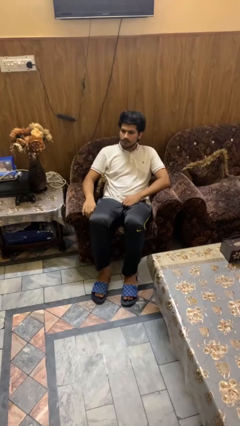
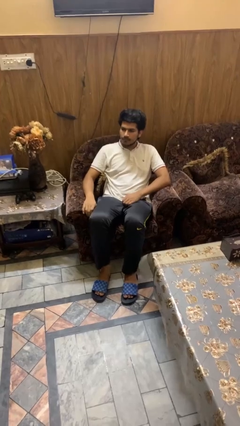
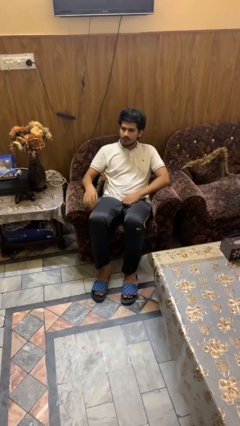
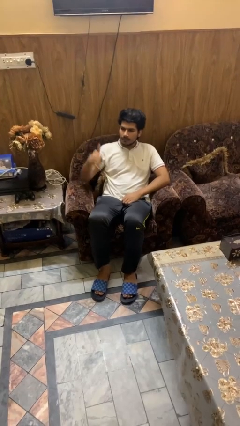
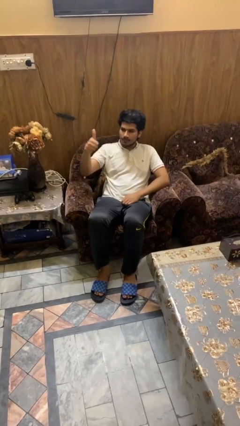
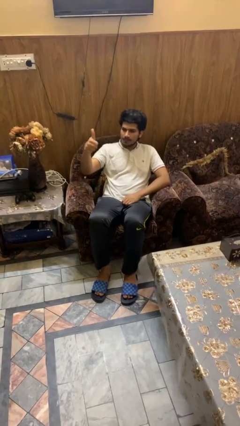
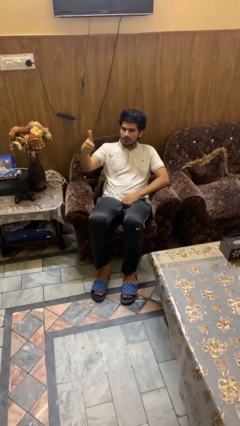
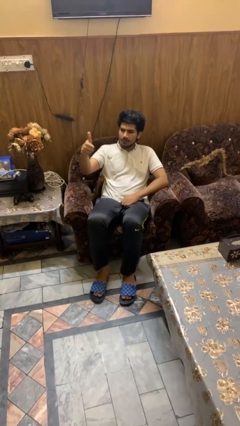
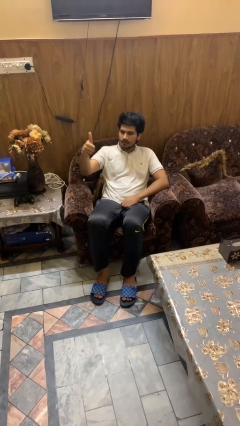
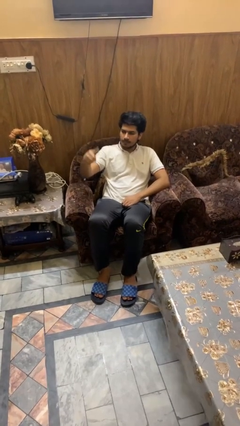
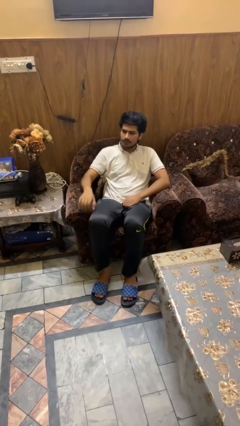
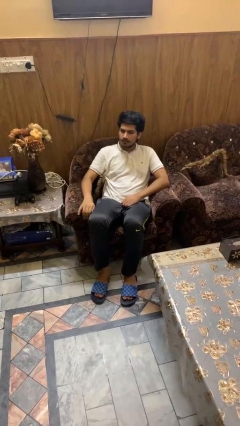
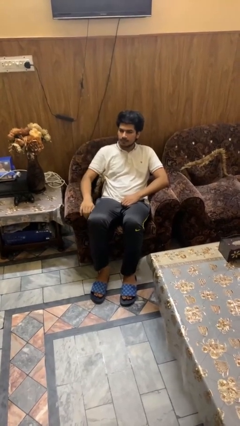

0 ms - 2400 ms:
person gestures thumbs up

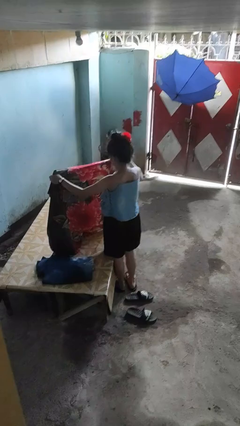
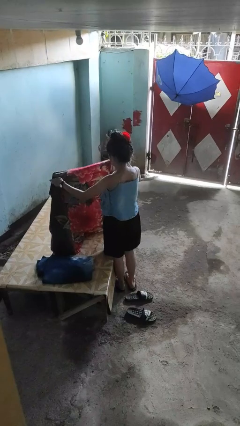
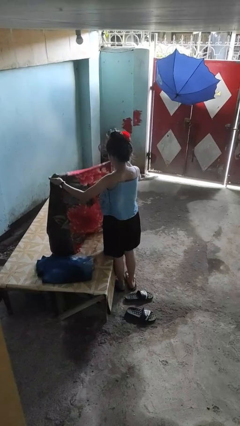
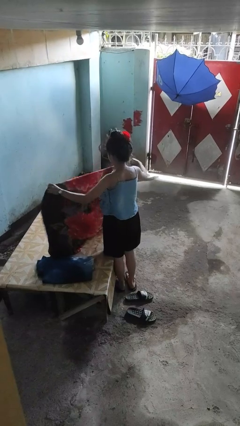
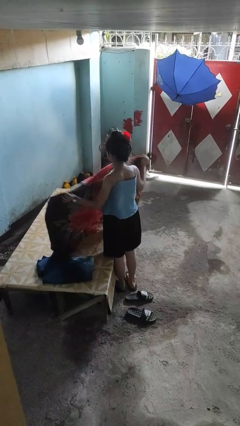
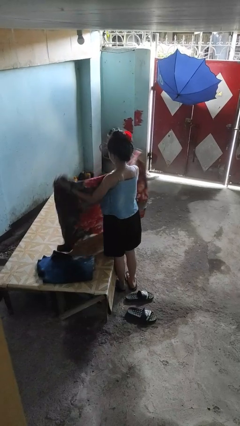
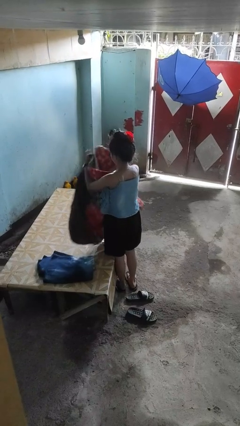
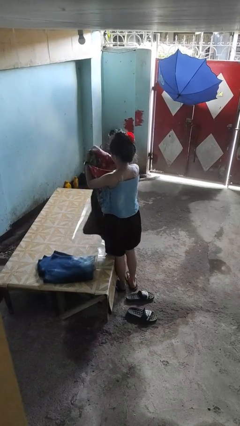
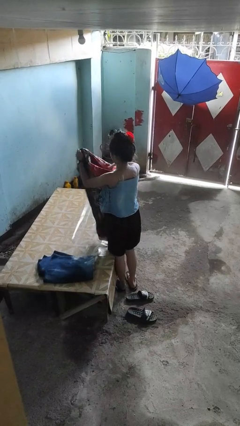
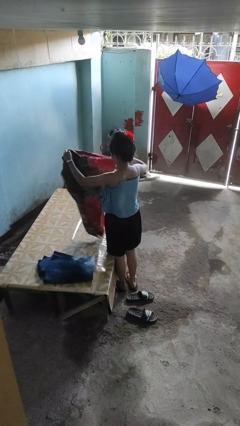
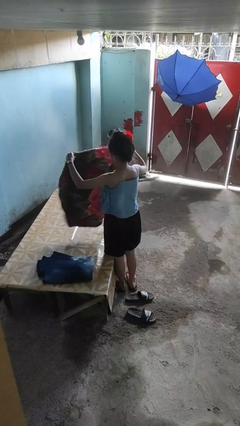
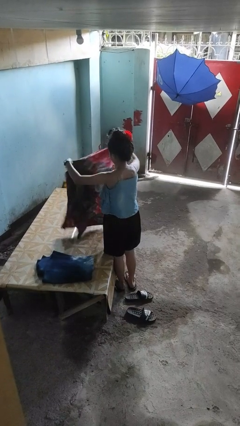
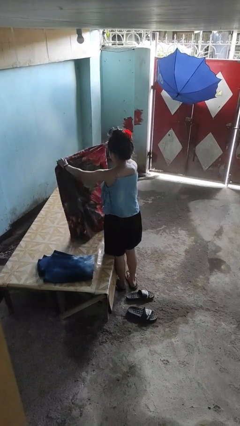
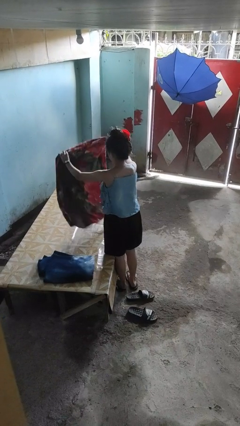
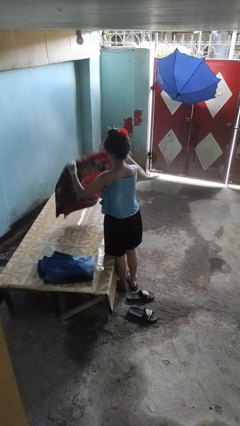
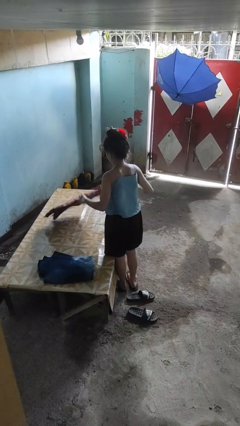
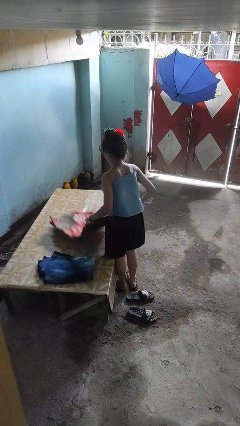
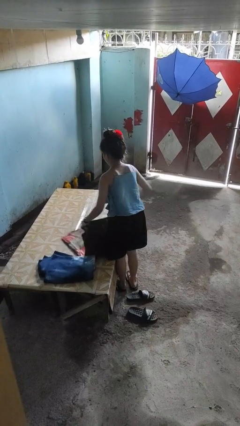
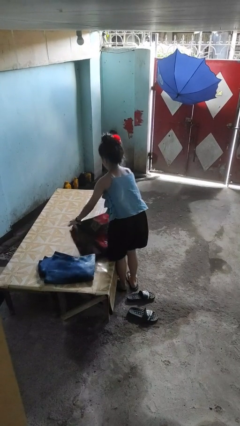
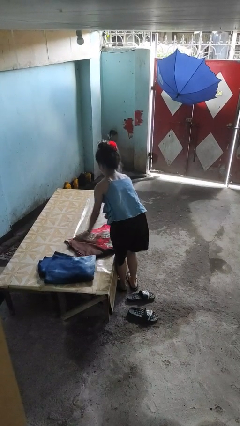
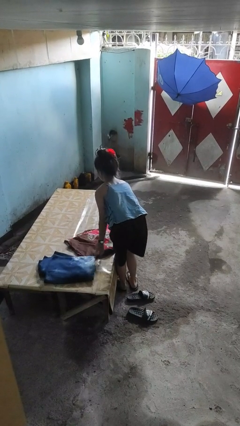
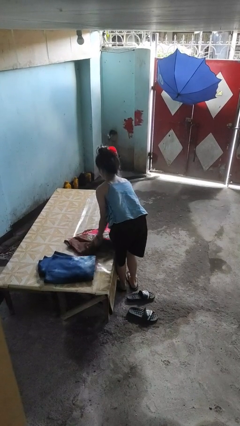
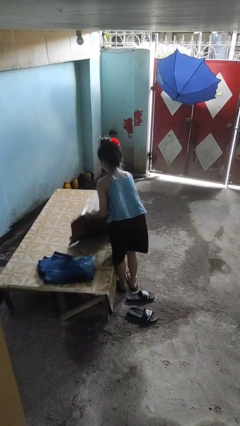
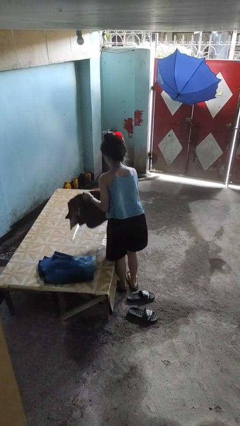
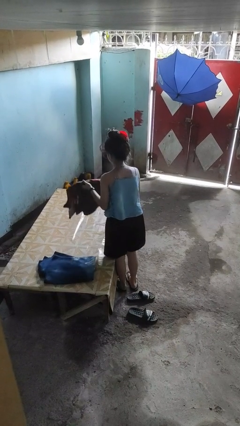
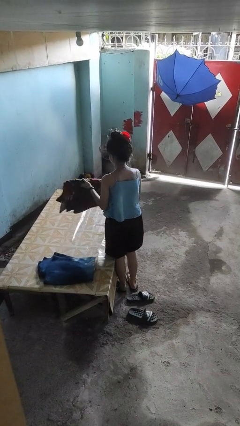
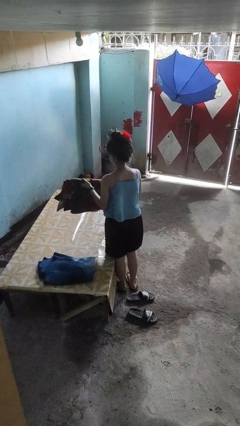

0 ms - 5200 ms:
person folds blanket

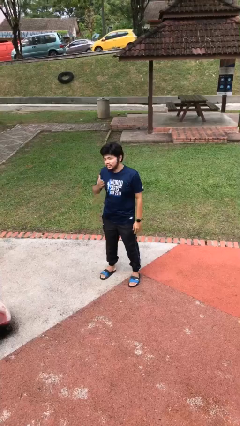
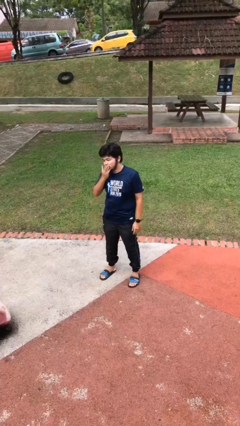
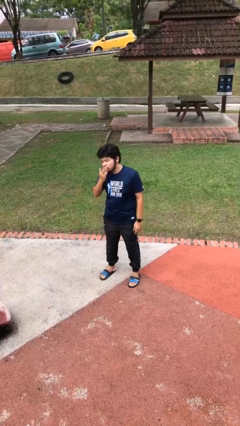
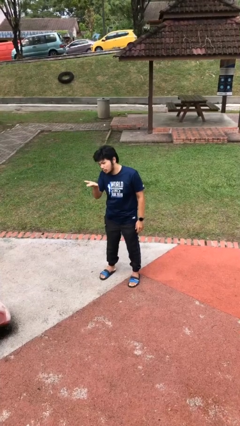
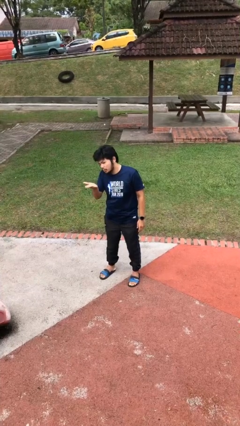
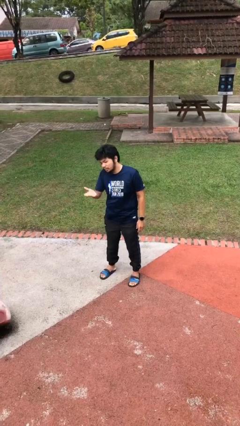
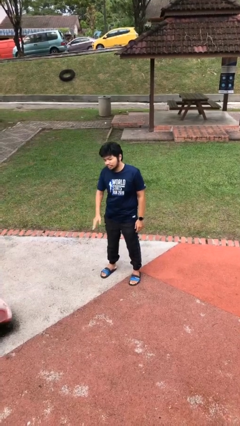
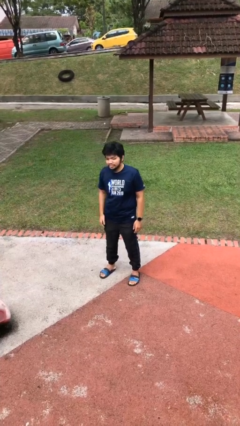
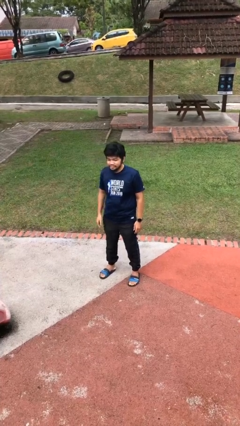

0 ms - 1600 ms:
person gestures blow kiss

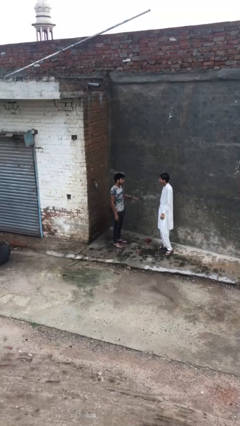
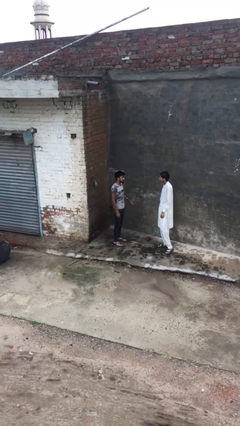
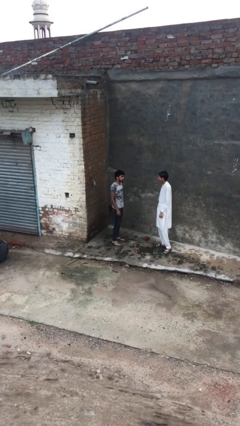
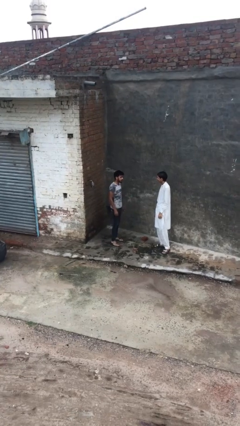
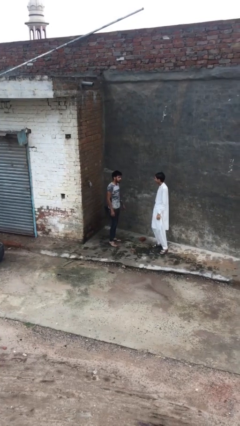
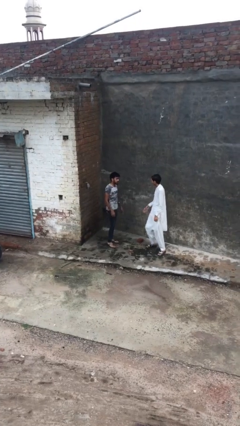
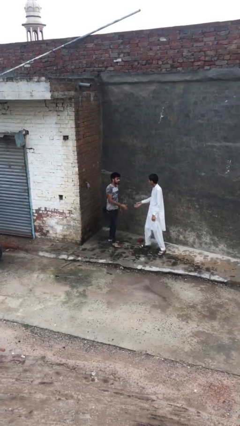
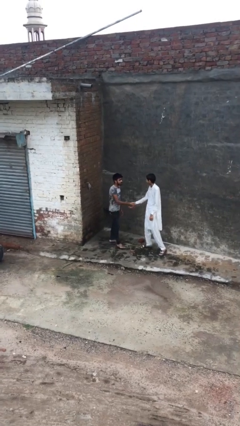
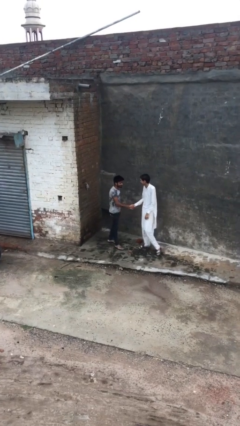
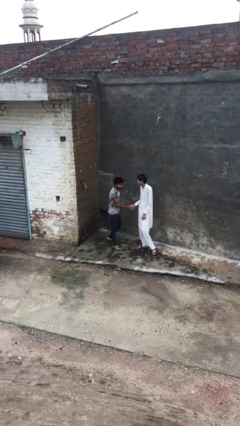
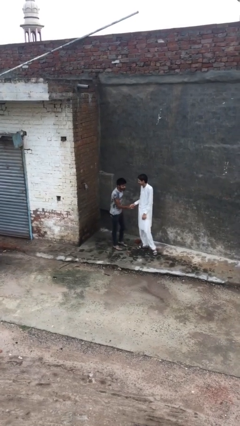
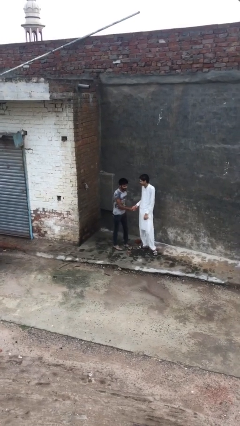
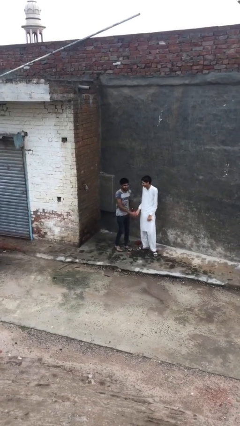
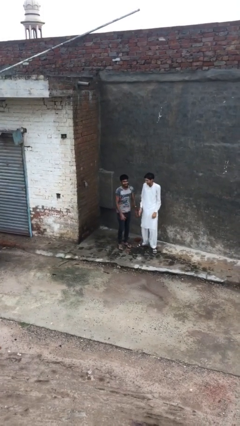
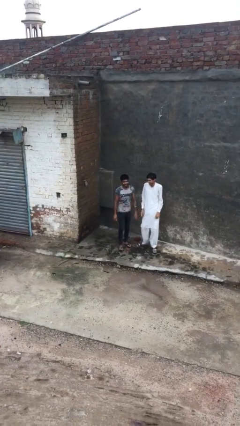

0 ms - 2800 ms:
person shakes hand

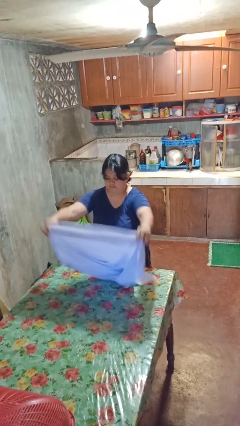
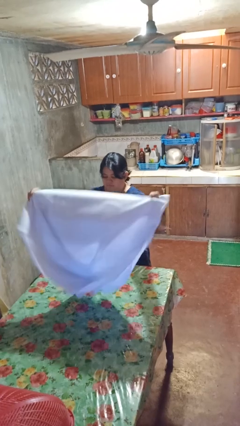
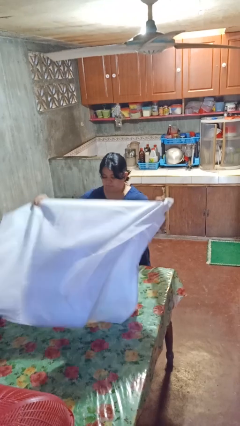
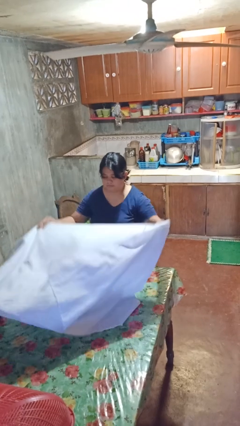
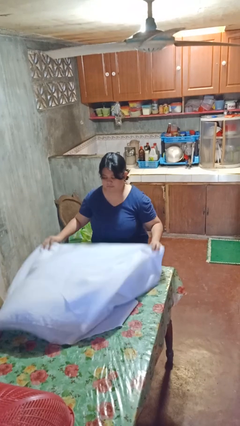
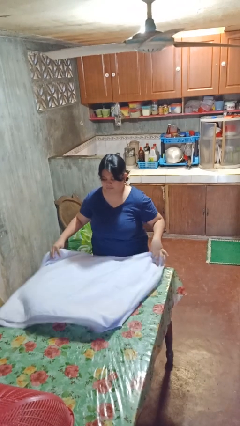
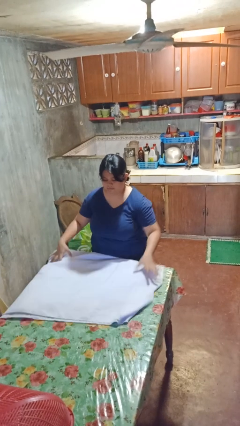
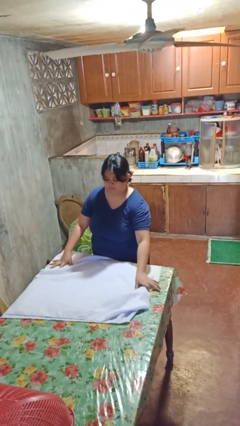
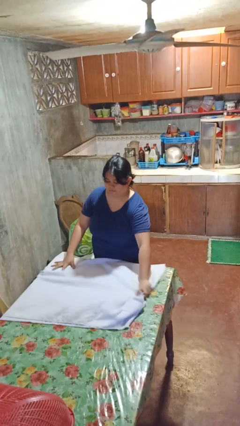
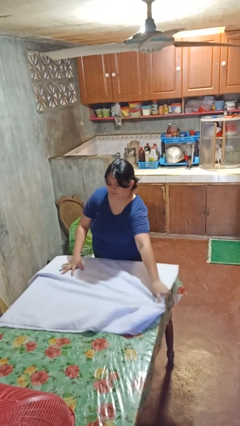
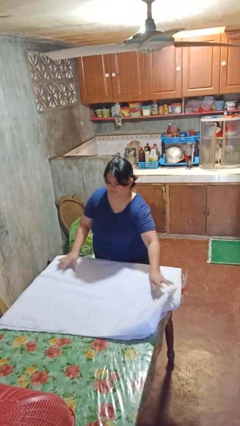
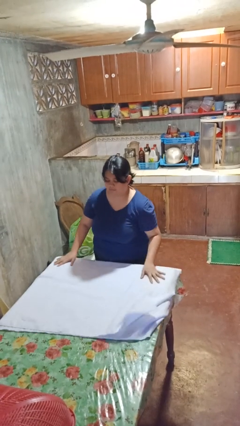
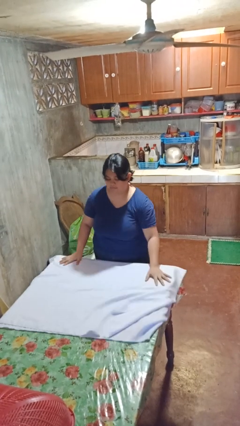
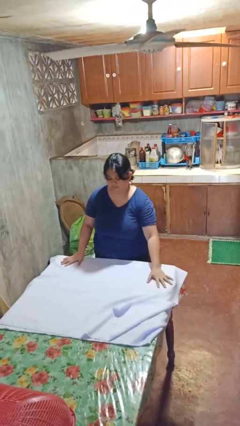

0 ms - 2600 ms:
person spreads tablecloth

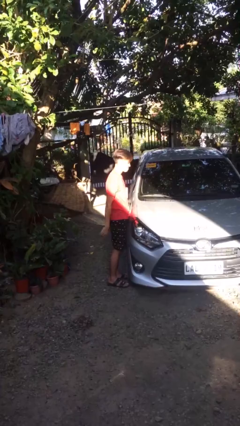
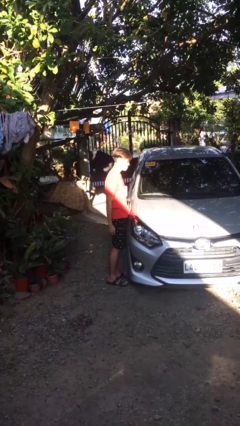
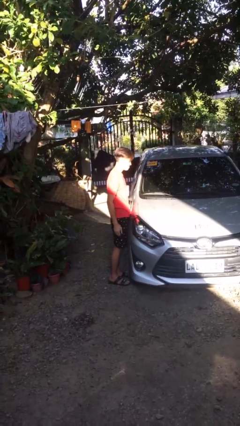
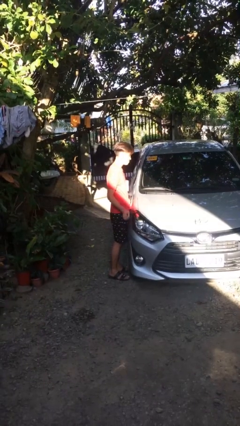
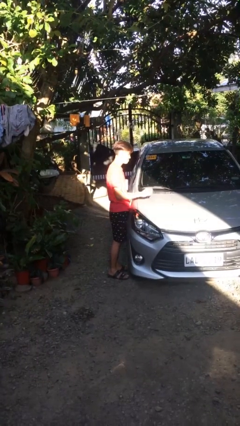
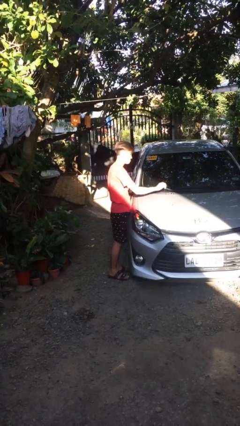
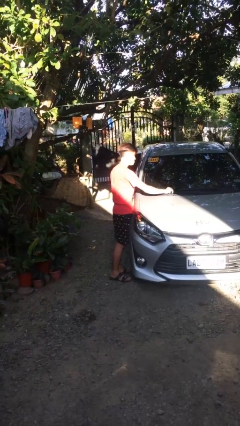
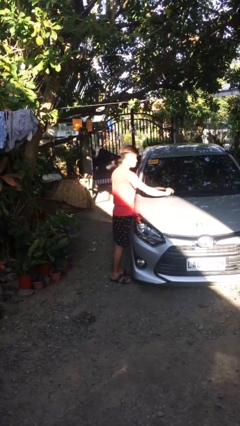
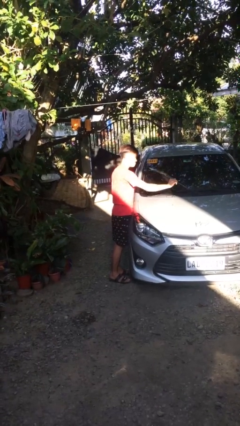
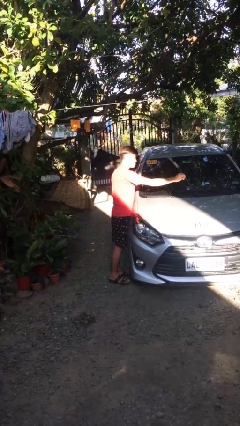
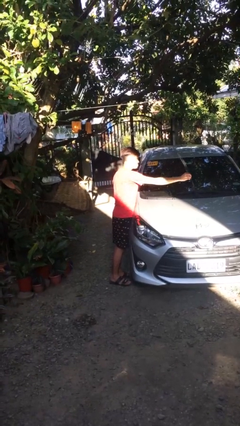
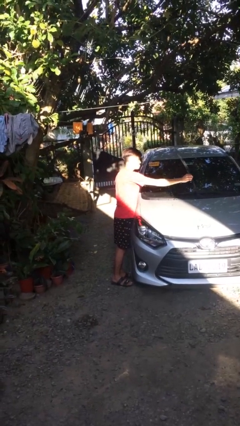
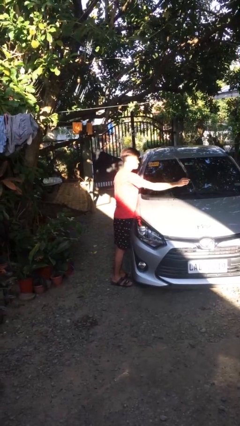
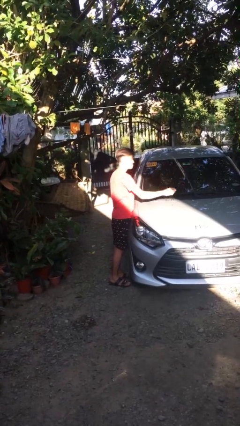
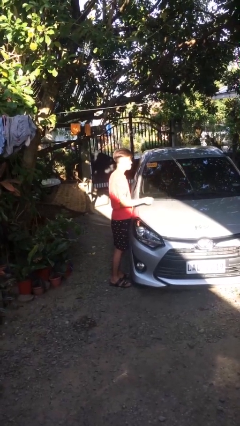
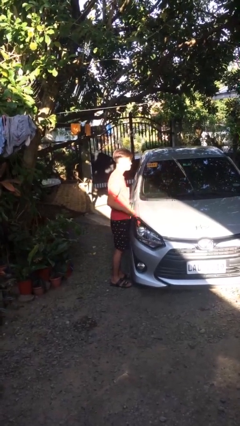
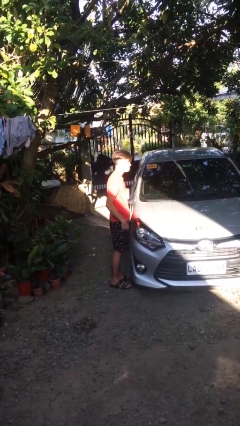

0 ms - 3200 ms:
person flips up car wipers
